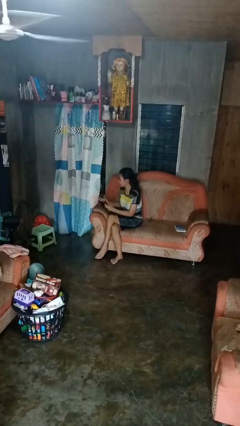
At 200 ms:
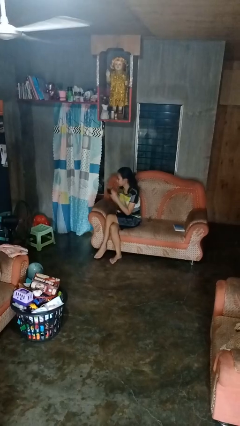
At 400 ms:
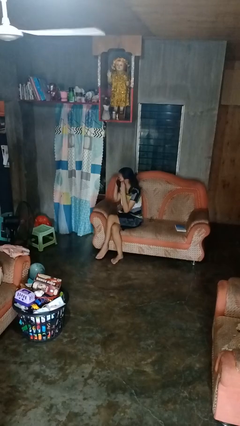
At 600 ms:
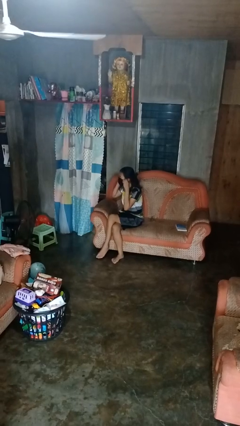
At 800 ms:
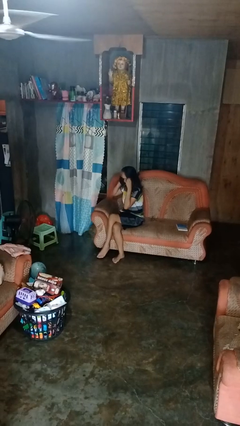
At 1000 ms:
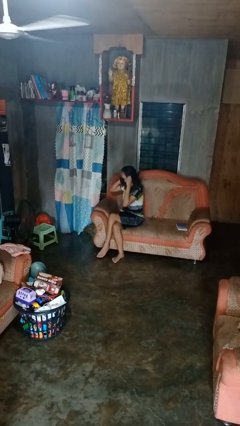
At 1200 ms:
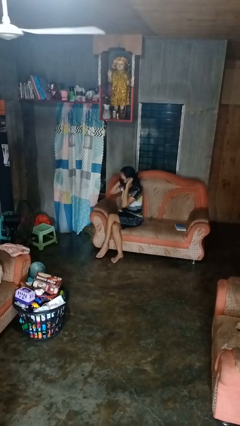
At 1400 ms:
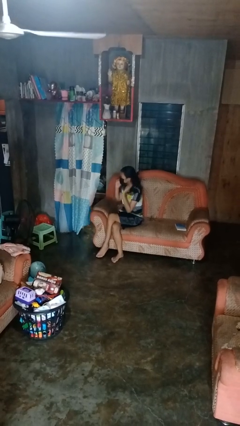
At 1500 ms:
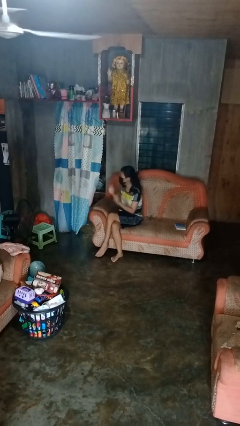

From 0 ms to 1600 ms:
person puts on facemask

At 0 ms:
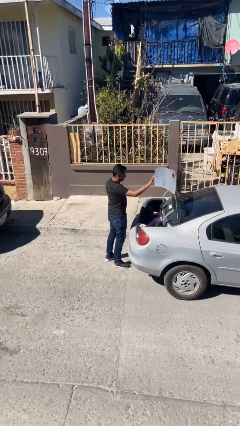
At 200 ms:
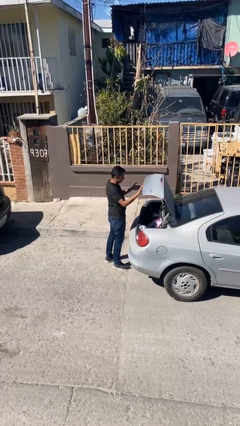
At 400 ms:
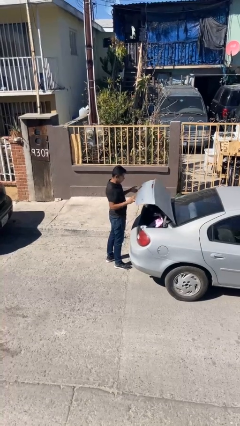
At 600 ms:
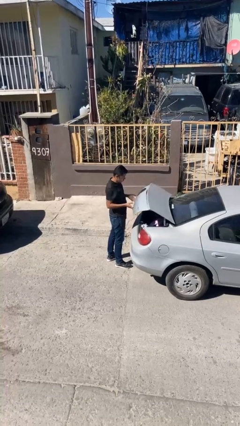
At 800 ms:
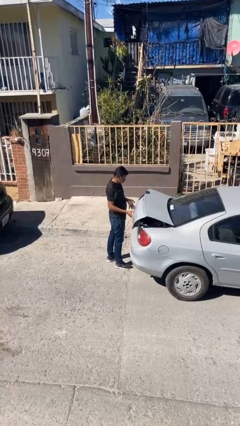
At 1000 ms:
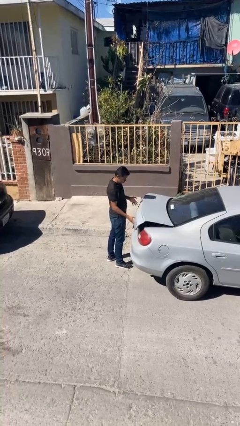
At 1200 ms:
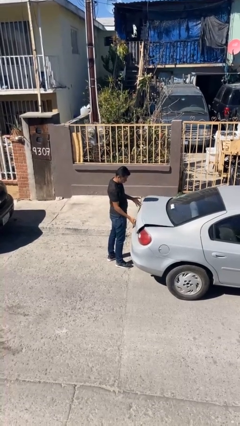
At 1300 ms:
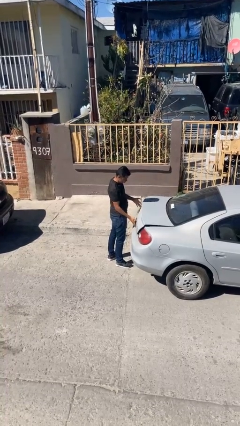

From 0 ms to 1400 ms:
person closes car trunk

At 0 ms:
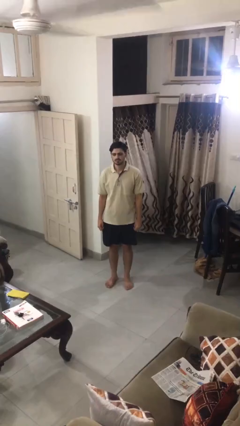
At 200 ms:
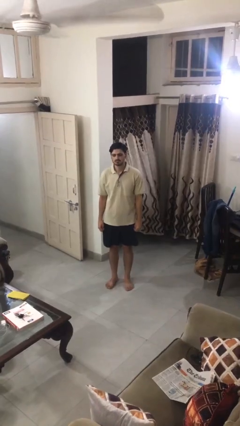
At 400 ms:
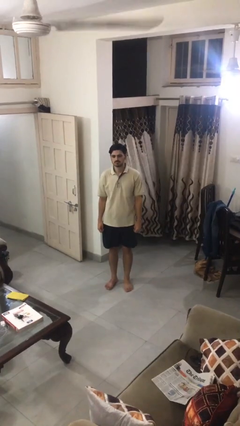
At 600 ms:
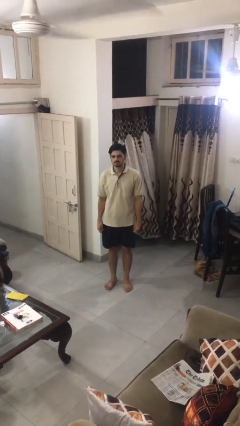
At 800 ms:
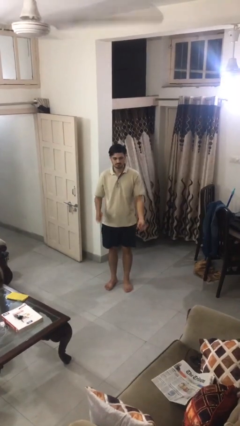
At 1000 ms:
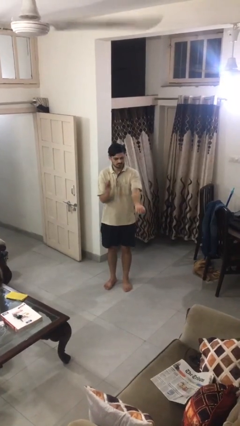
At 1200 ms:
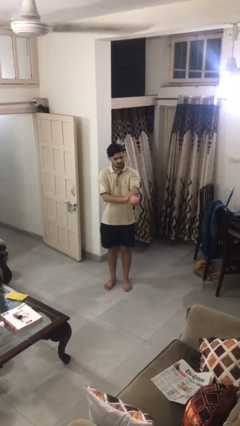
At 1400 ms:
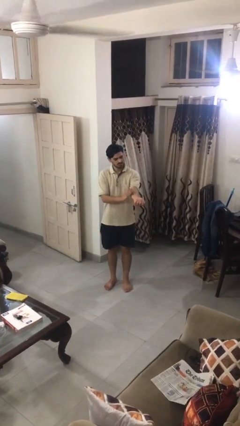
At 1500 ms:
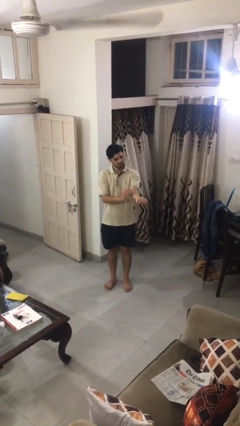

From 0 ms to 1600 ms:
person swats bug

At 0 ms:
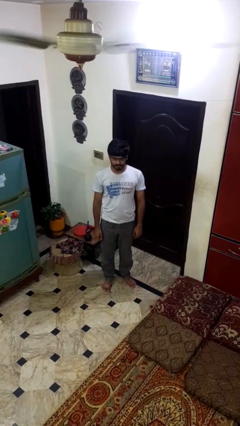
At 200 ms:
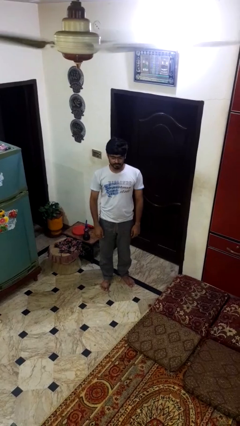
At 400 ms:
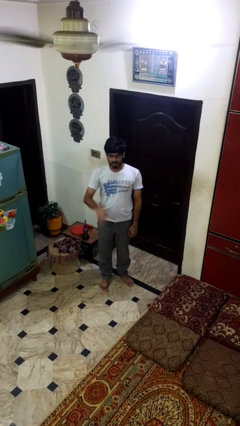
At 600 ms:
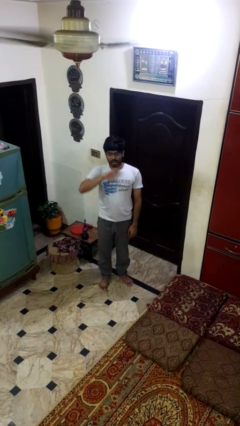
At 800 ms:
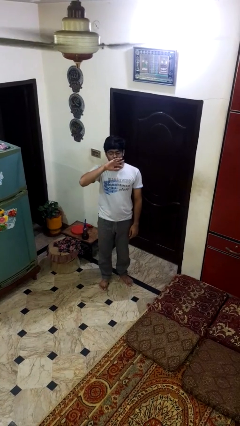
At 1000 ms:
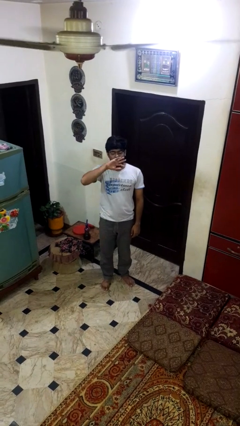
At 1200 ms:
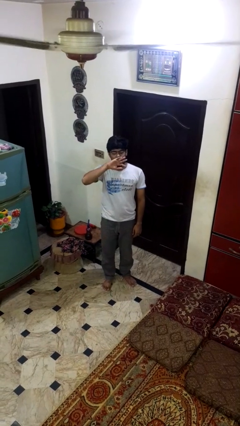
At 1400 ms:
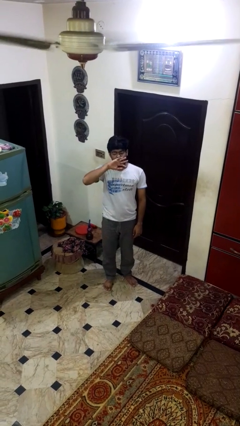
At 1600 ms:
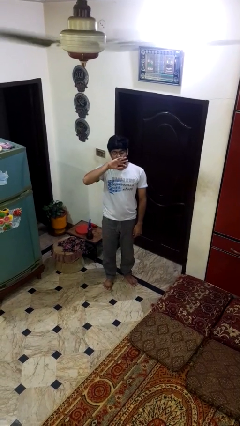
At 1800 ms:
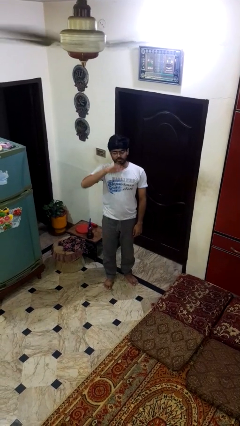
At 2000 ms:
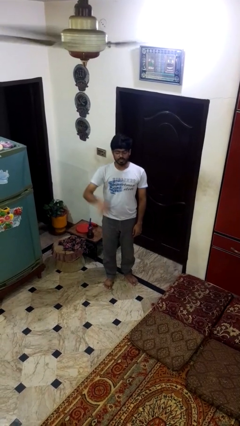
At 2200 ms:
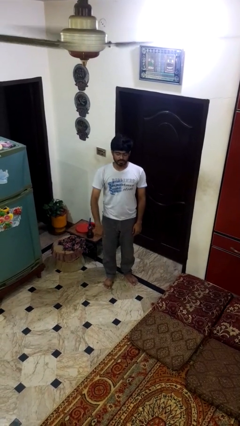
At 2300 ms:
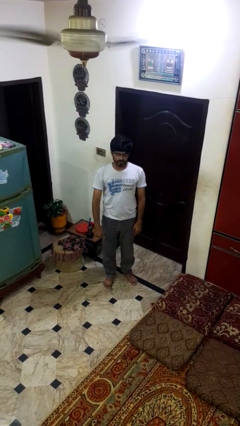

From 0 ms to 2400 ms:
person yawns

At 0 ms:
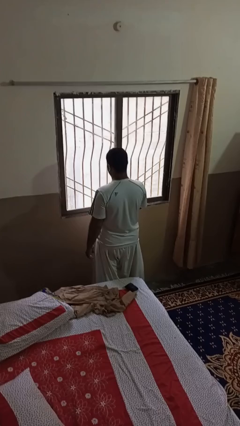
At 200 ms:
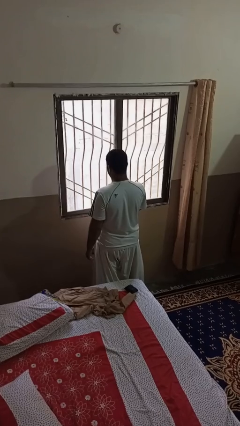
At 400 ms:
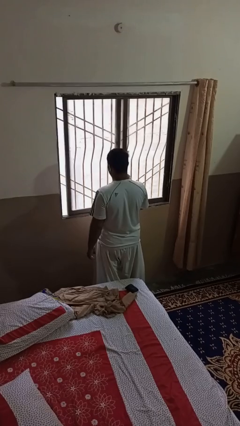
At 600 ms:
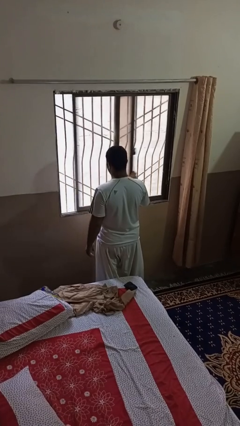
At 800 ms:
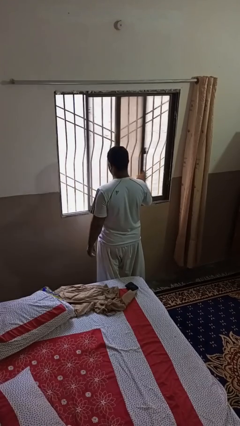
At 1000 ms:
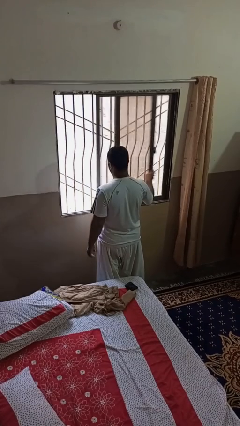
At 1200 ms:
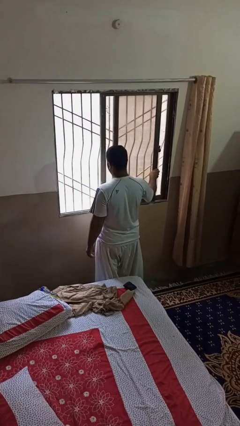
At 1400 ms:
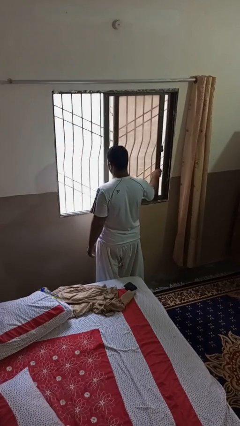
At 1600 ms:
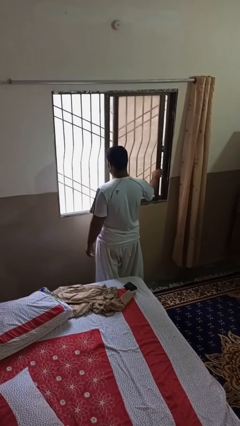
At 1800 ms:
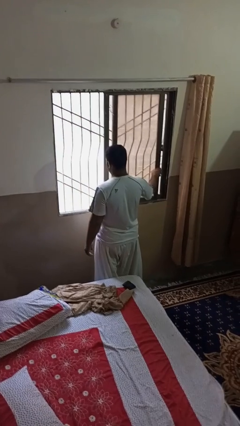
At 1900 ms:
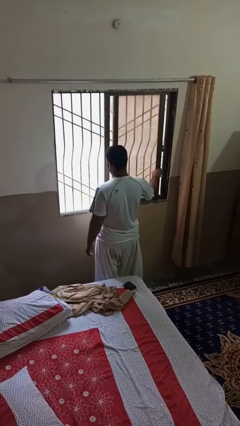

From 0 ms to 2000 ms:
person opens home window

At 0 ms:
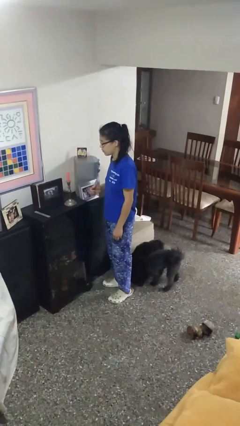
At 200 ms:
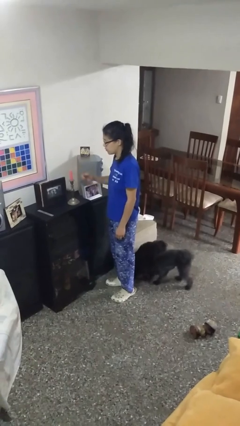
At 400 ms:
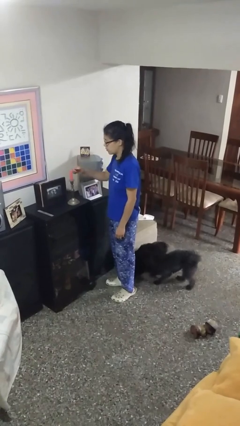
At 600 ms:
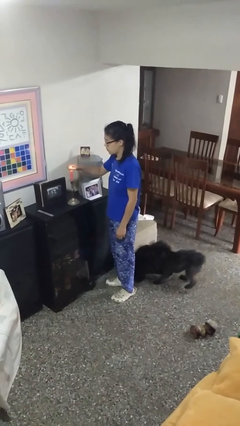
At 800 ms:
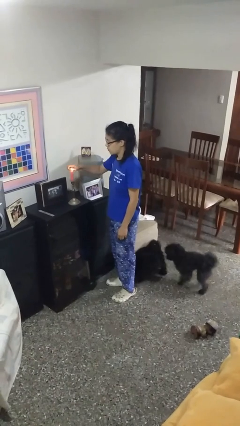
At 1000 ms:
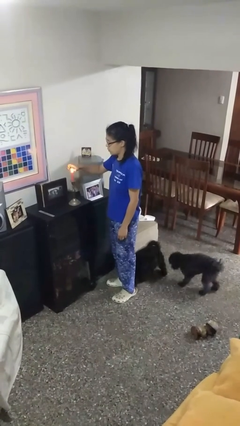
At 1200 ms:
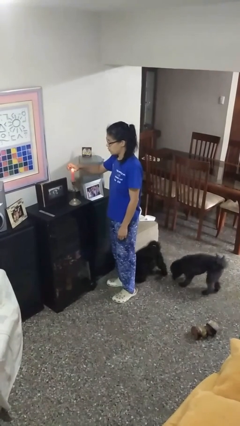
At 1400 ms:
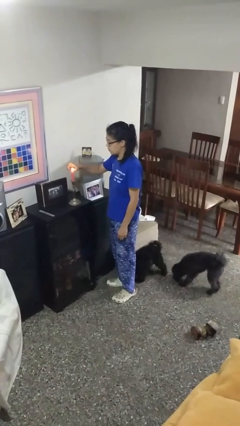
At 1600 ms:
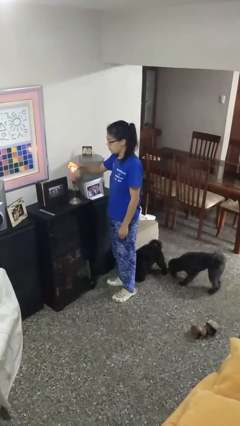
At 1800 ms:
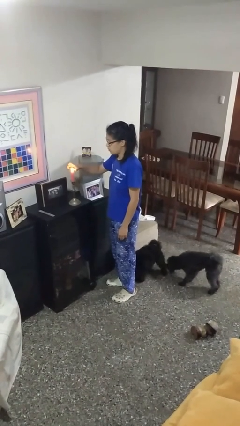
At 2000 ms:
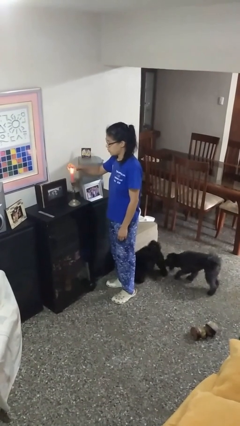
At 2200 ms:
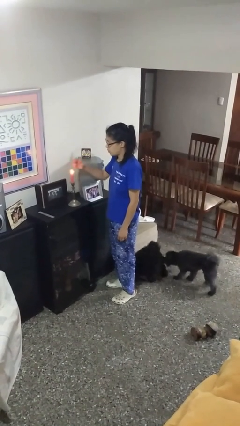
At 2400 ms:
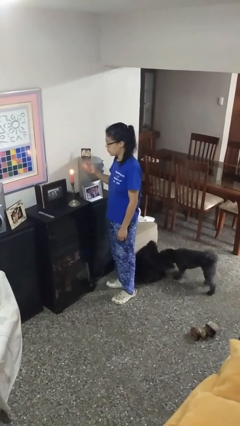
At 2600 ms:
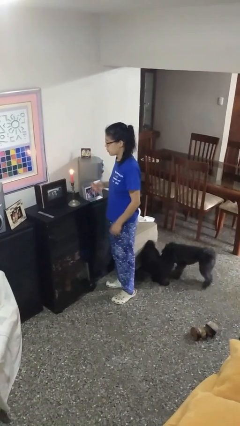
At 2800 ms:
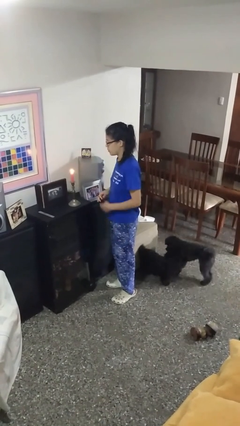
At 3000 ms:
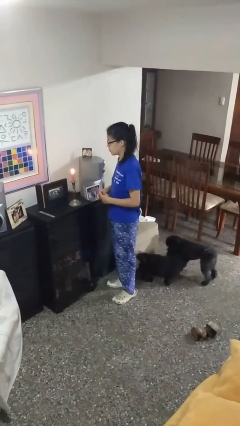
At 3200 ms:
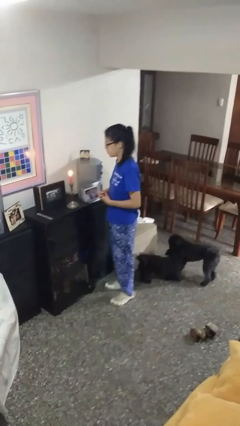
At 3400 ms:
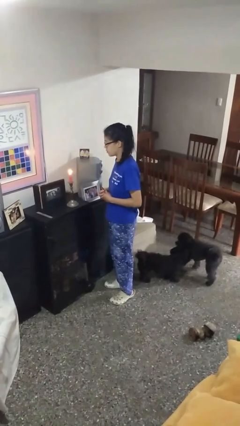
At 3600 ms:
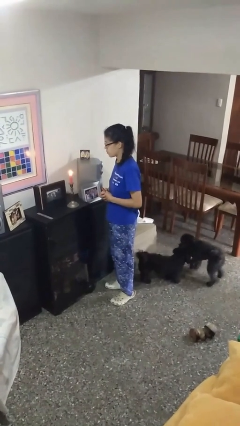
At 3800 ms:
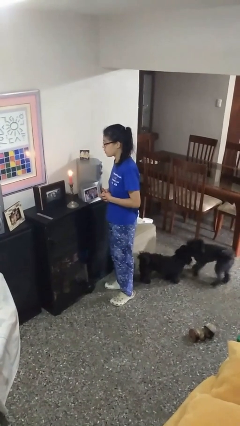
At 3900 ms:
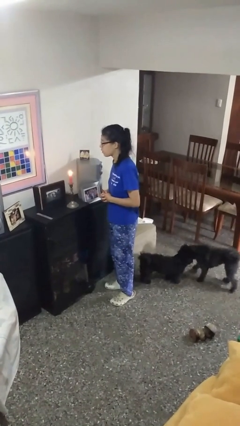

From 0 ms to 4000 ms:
person lights candle

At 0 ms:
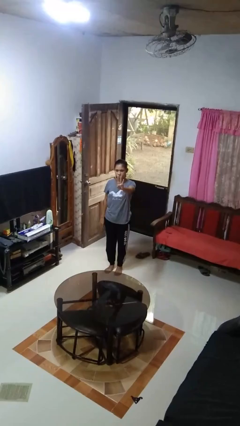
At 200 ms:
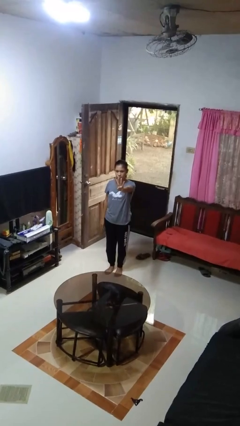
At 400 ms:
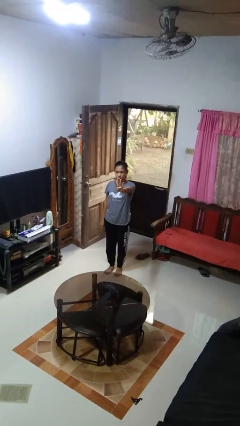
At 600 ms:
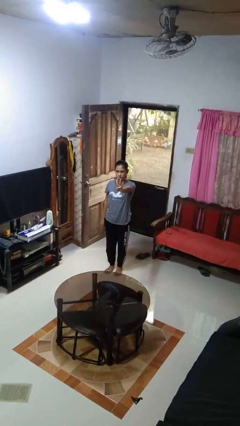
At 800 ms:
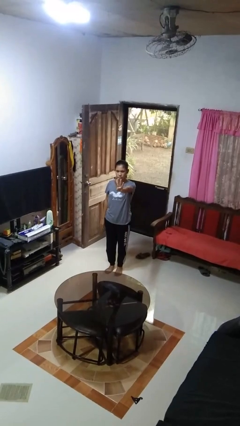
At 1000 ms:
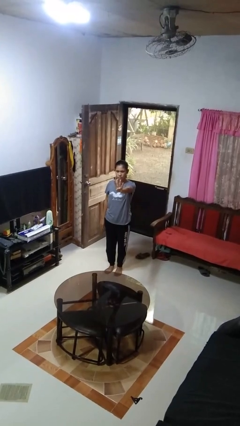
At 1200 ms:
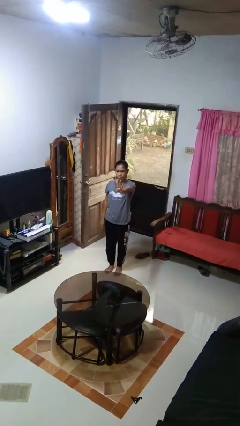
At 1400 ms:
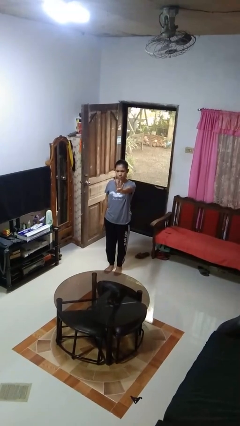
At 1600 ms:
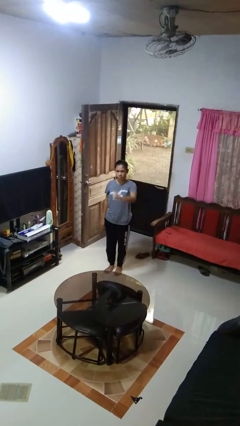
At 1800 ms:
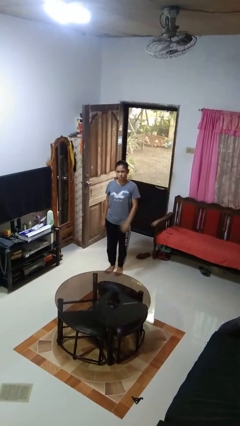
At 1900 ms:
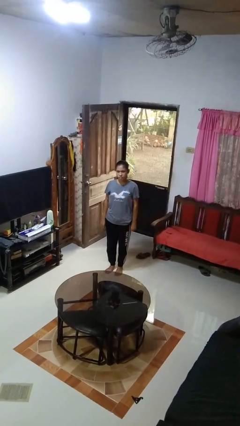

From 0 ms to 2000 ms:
person gestures number four

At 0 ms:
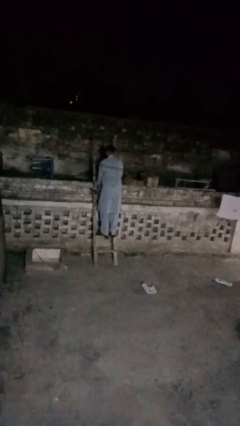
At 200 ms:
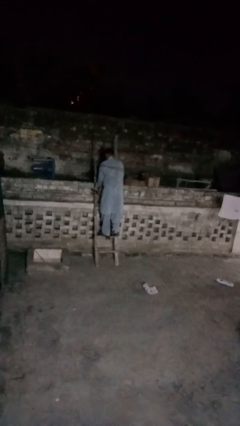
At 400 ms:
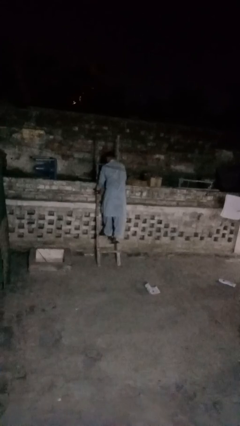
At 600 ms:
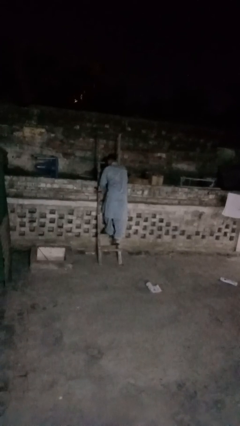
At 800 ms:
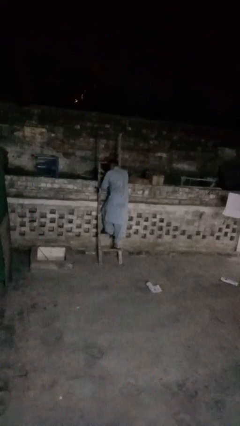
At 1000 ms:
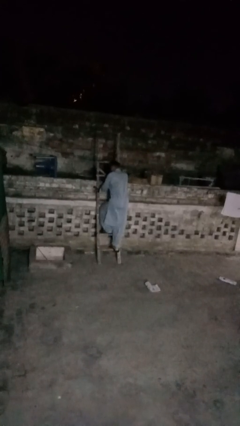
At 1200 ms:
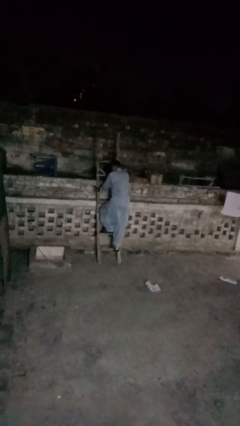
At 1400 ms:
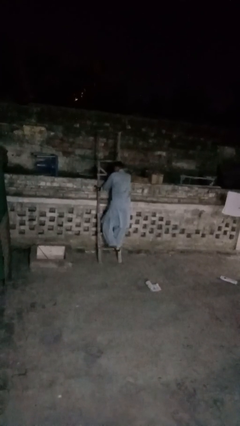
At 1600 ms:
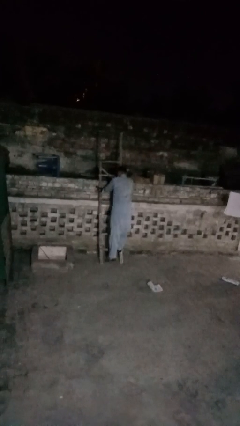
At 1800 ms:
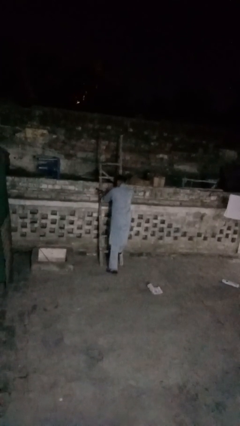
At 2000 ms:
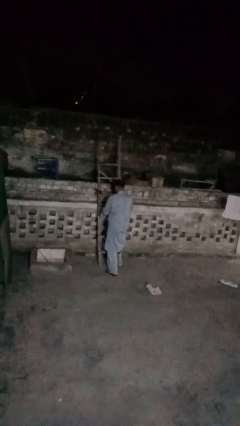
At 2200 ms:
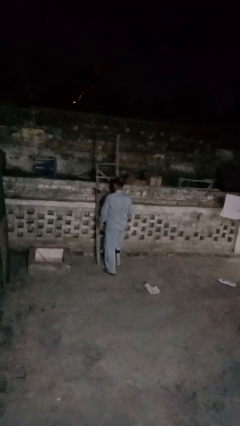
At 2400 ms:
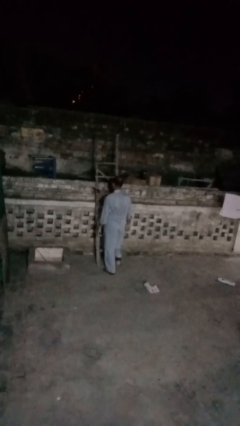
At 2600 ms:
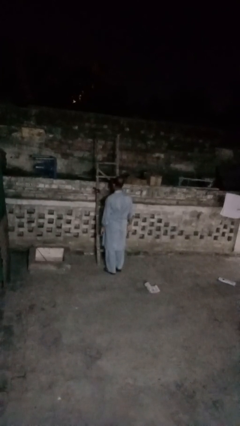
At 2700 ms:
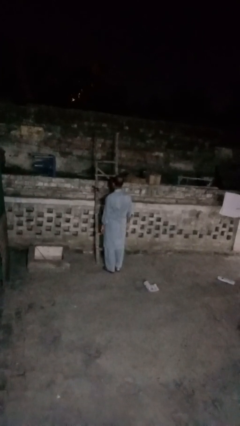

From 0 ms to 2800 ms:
person climbs down ladder
